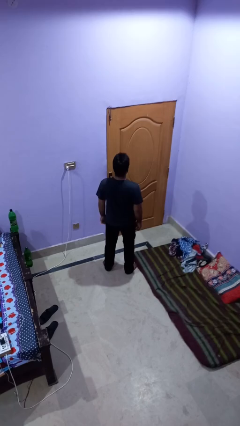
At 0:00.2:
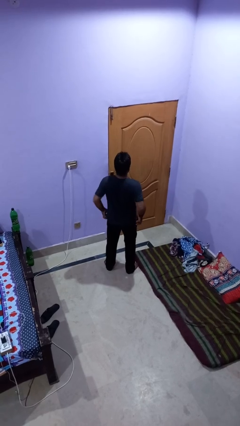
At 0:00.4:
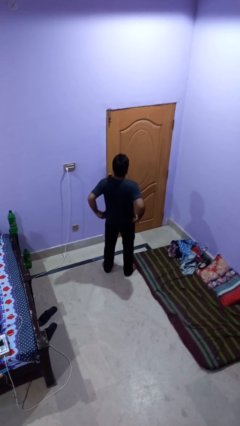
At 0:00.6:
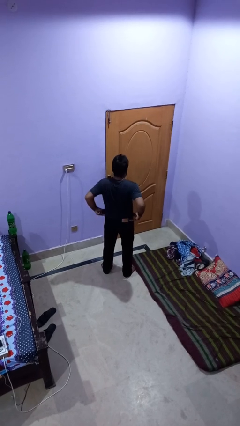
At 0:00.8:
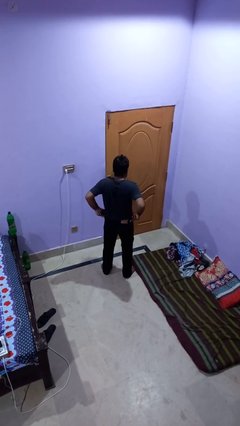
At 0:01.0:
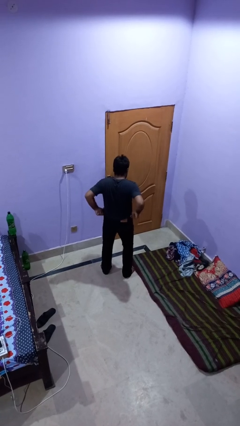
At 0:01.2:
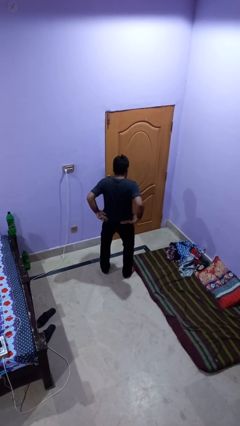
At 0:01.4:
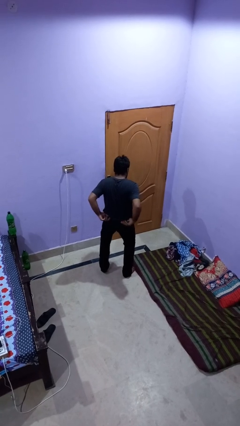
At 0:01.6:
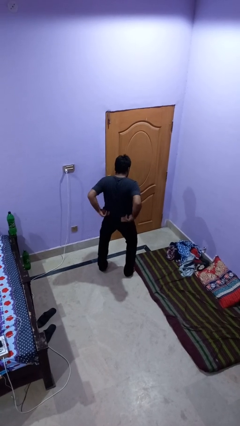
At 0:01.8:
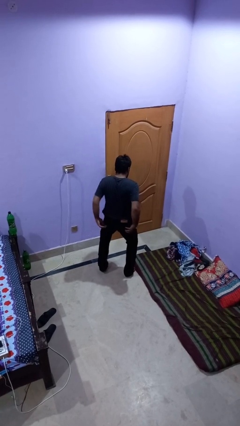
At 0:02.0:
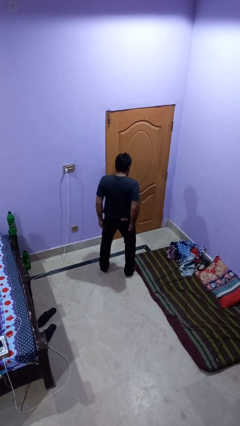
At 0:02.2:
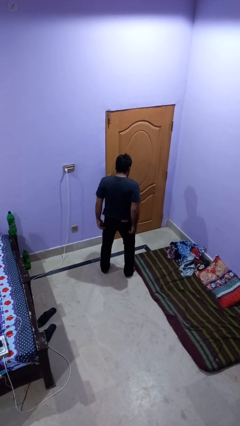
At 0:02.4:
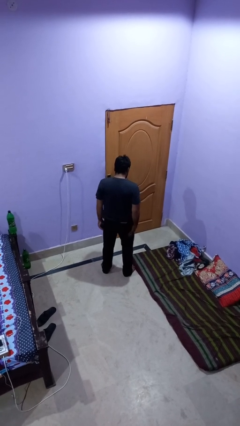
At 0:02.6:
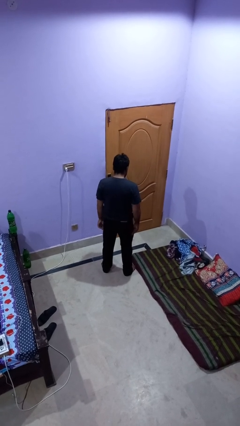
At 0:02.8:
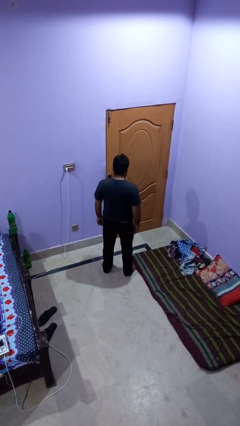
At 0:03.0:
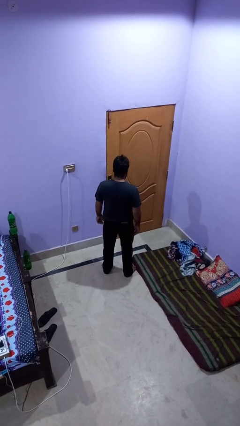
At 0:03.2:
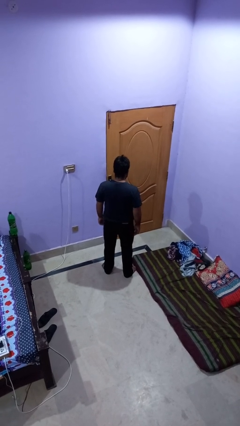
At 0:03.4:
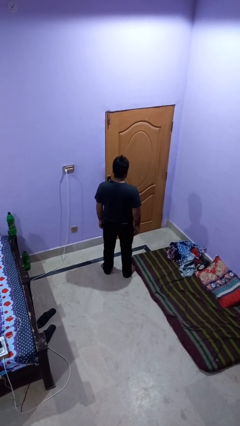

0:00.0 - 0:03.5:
person hikes up pants

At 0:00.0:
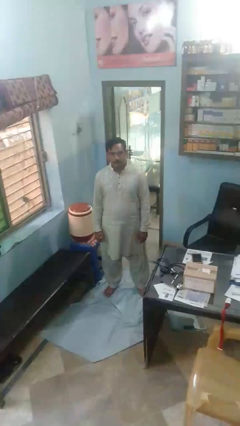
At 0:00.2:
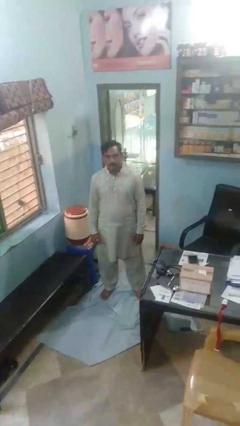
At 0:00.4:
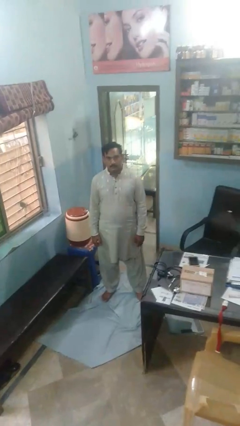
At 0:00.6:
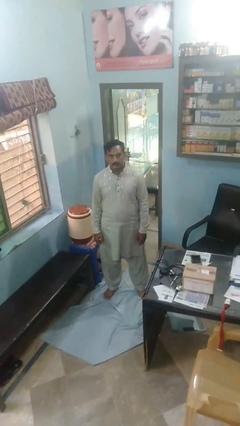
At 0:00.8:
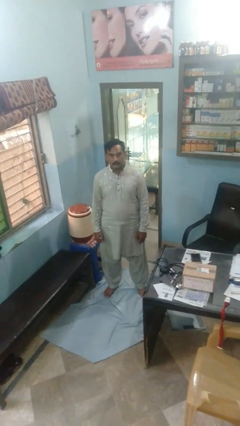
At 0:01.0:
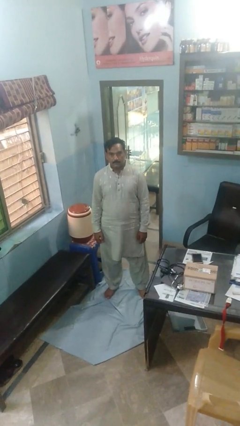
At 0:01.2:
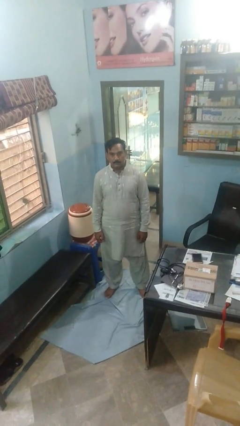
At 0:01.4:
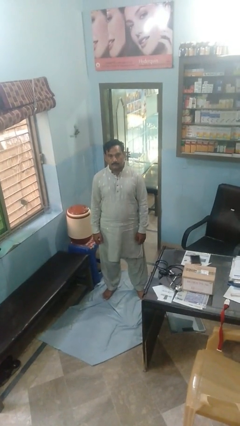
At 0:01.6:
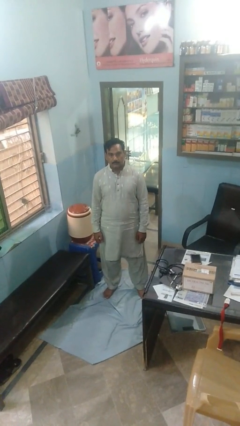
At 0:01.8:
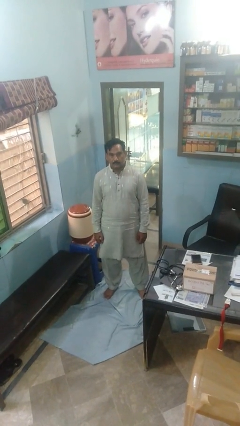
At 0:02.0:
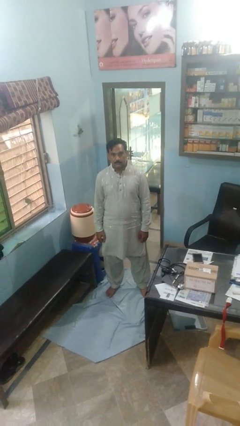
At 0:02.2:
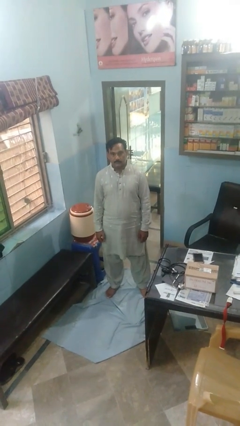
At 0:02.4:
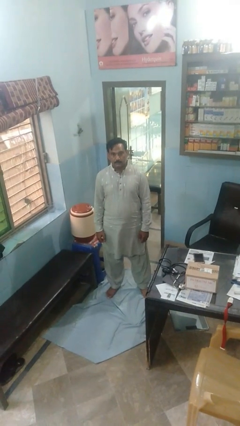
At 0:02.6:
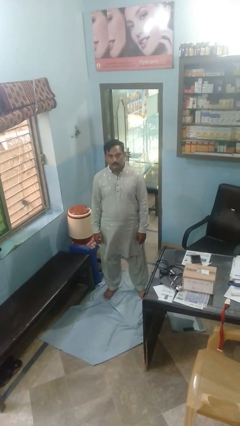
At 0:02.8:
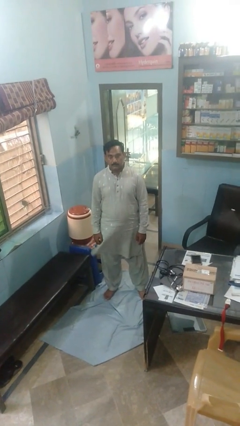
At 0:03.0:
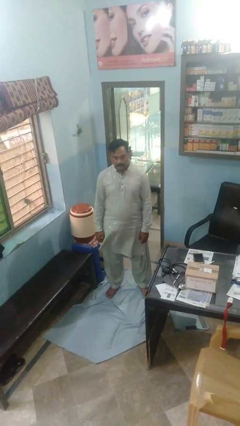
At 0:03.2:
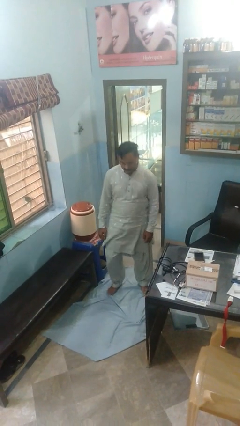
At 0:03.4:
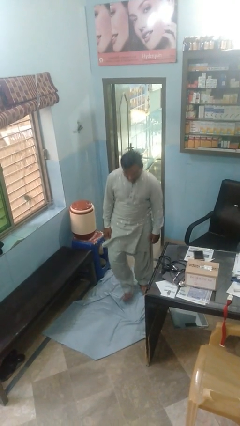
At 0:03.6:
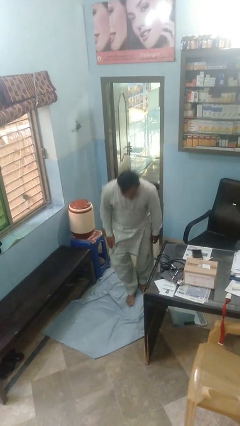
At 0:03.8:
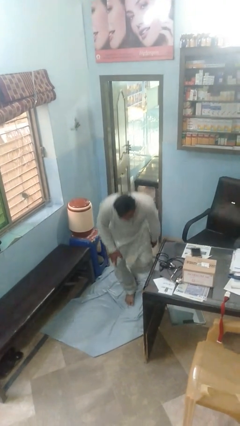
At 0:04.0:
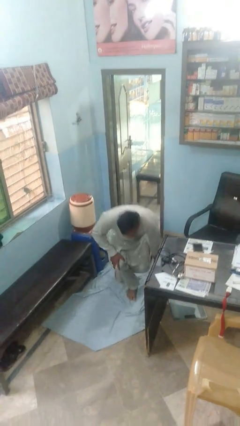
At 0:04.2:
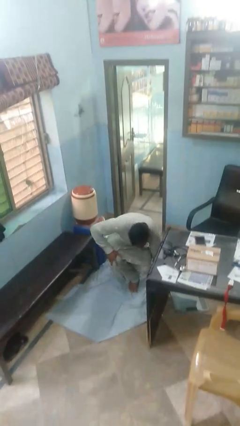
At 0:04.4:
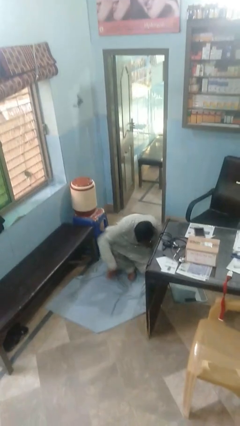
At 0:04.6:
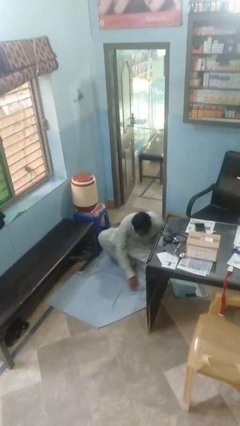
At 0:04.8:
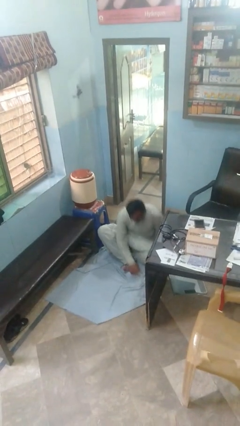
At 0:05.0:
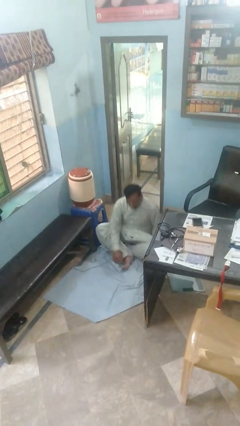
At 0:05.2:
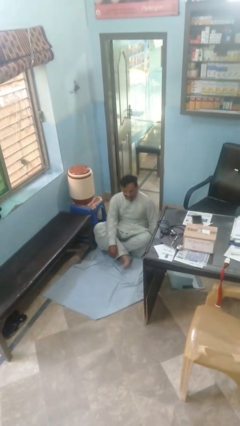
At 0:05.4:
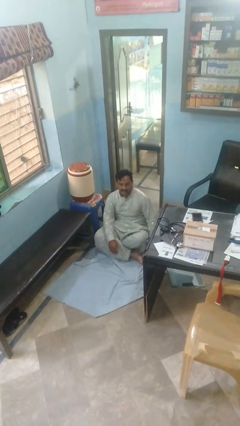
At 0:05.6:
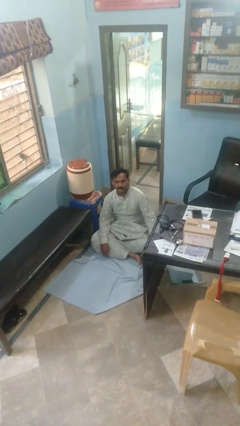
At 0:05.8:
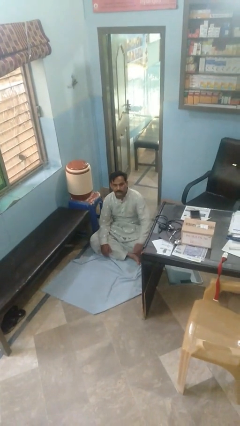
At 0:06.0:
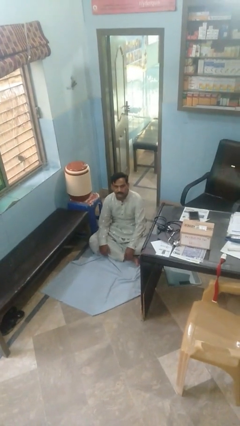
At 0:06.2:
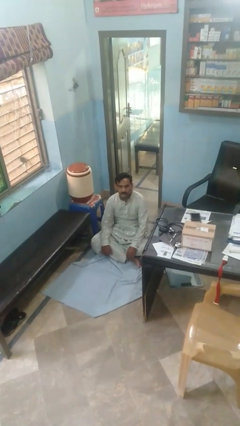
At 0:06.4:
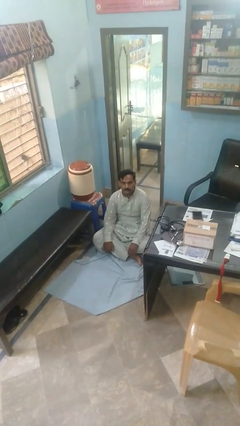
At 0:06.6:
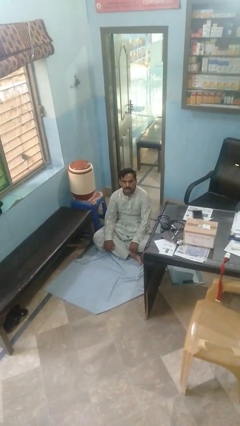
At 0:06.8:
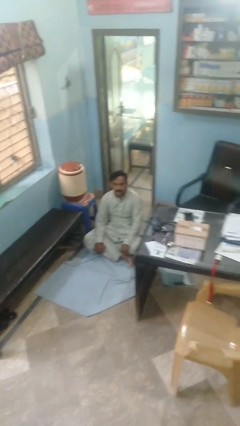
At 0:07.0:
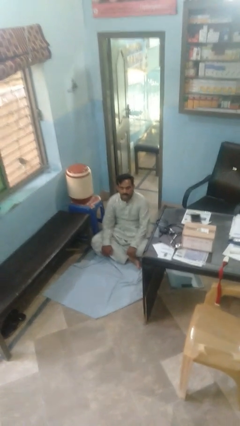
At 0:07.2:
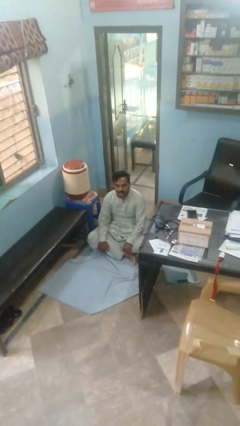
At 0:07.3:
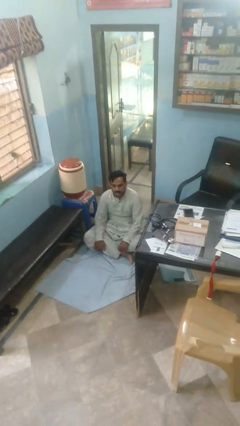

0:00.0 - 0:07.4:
person sits crisscross
